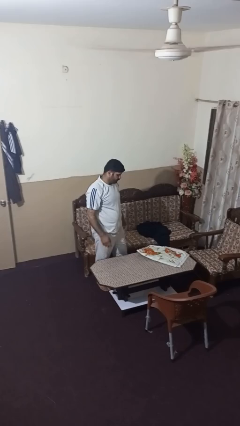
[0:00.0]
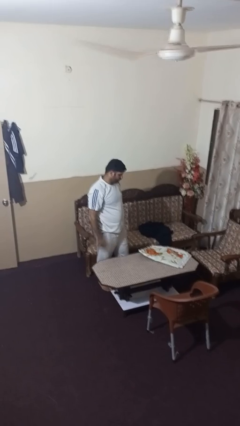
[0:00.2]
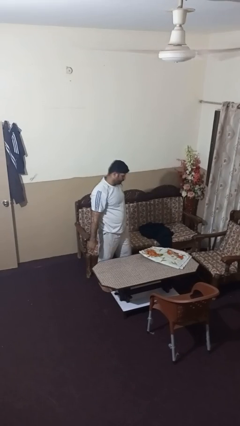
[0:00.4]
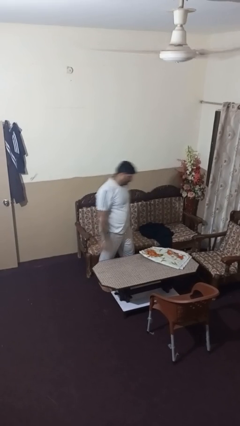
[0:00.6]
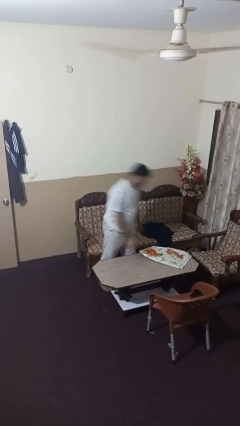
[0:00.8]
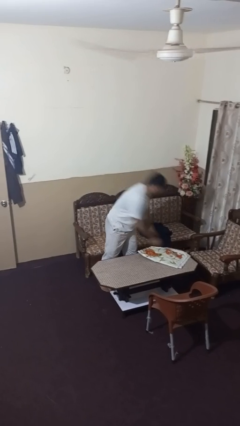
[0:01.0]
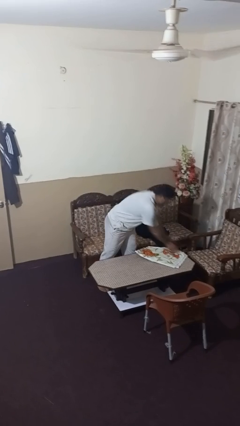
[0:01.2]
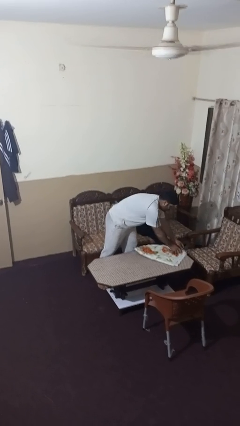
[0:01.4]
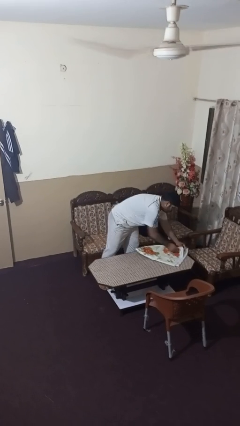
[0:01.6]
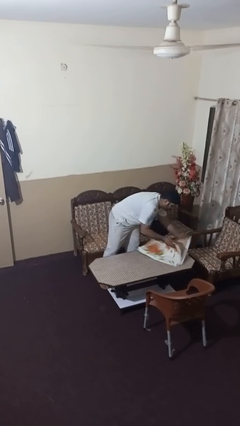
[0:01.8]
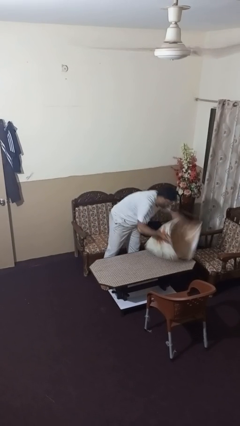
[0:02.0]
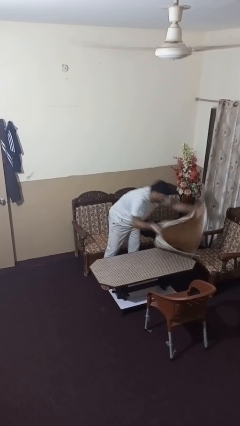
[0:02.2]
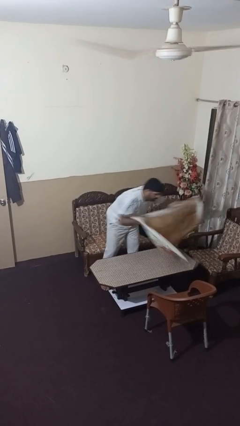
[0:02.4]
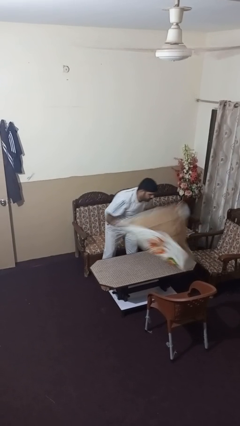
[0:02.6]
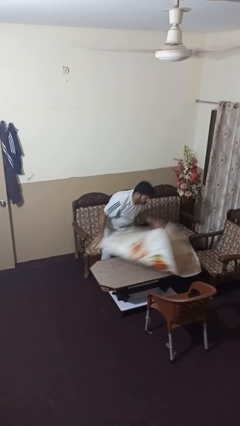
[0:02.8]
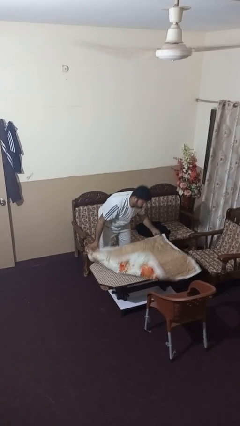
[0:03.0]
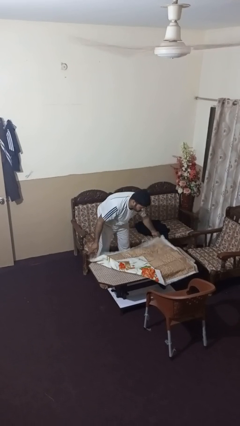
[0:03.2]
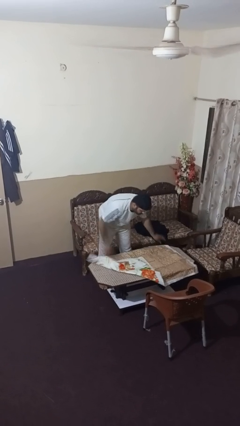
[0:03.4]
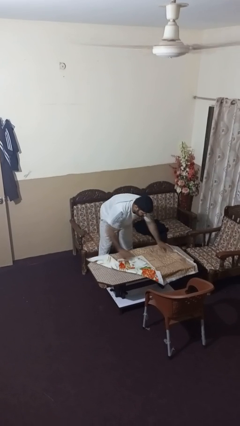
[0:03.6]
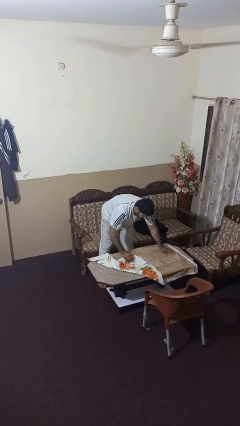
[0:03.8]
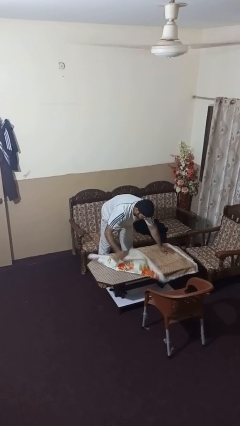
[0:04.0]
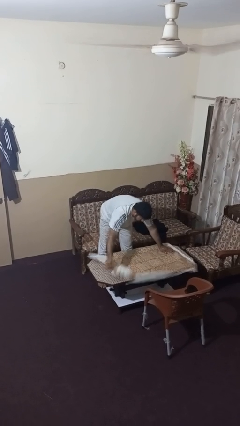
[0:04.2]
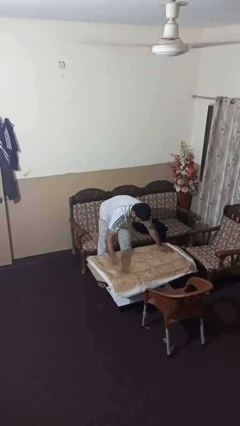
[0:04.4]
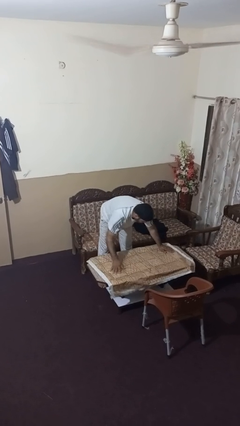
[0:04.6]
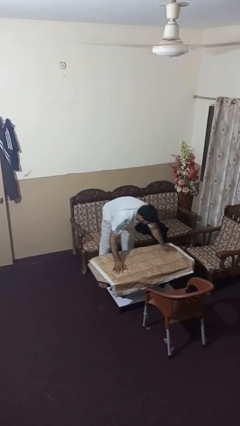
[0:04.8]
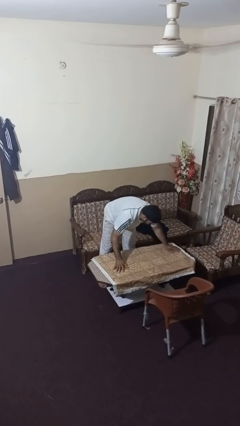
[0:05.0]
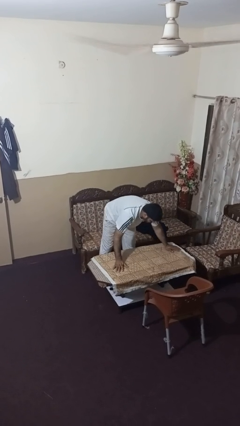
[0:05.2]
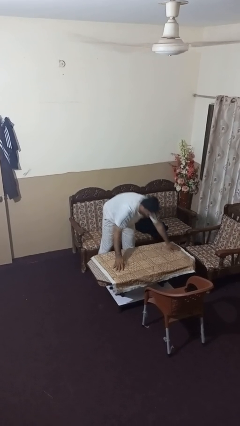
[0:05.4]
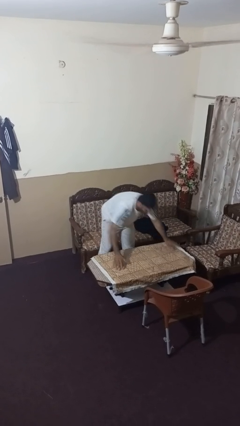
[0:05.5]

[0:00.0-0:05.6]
person spreads tablecloth

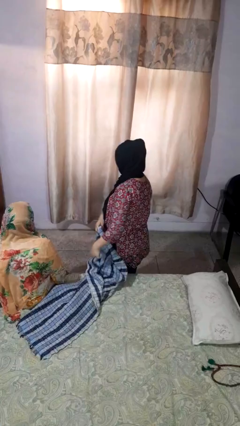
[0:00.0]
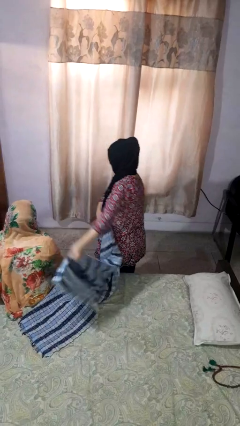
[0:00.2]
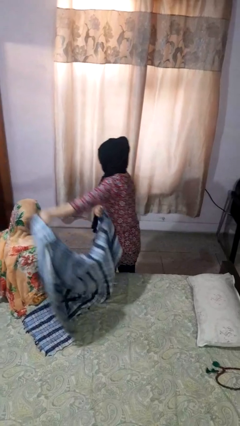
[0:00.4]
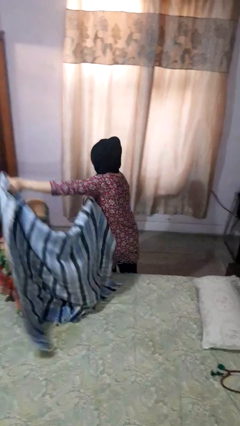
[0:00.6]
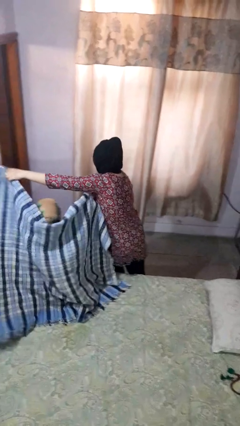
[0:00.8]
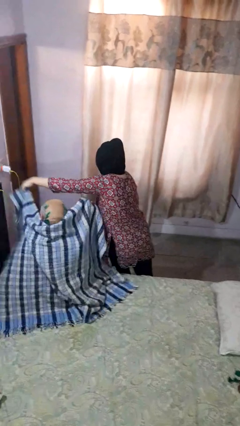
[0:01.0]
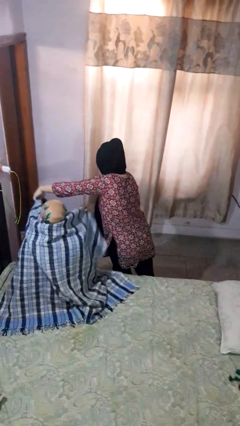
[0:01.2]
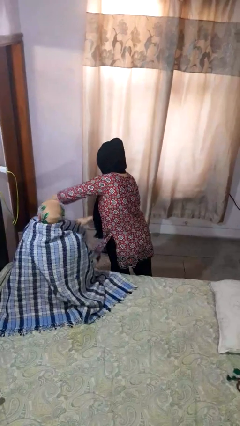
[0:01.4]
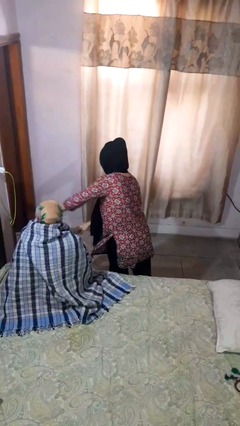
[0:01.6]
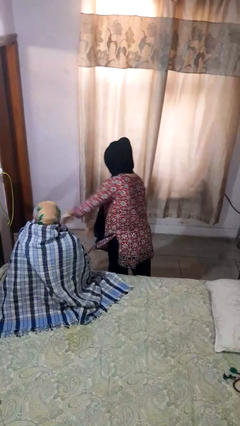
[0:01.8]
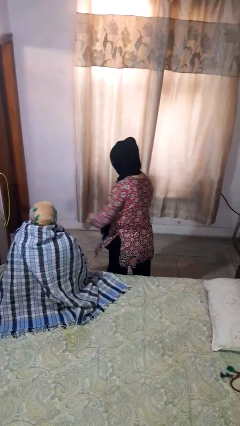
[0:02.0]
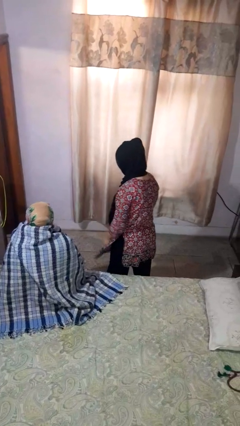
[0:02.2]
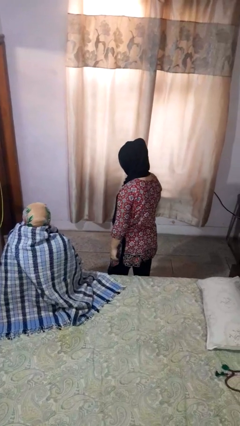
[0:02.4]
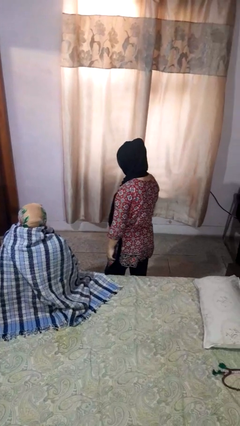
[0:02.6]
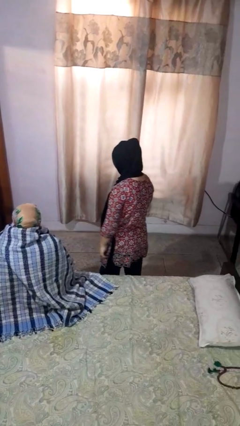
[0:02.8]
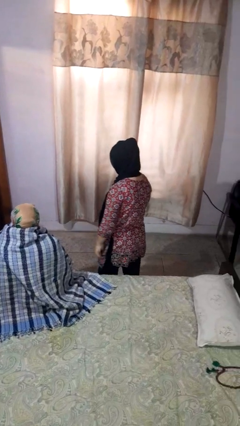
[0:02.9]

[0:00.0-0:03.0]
person covers friend with blanket

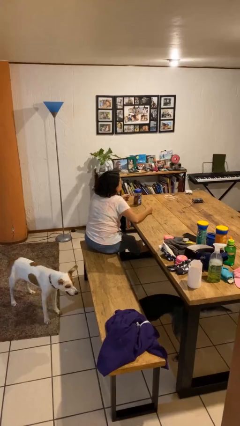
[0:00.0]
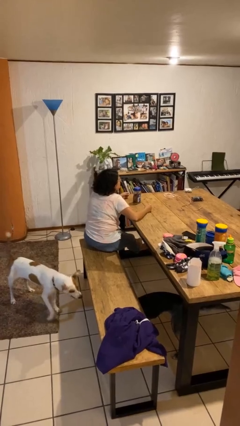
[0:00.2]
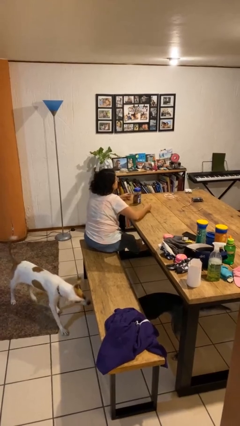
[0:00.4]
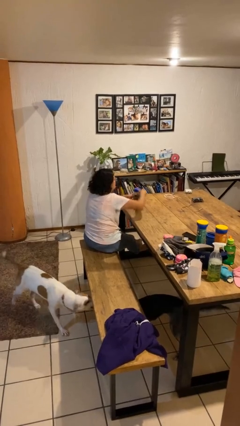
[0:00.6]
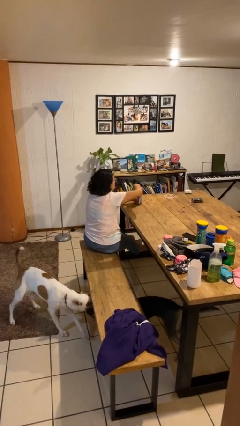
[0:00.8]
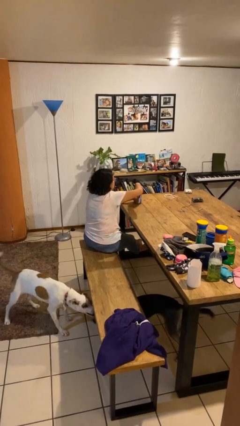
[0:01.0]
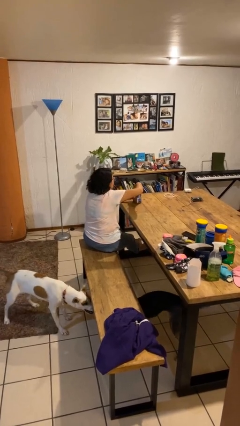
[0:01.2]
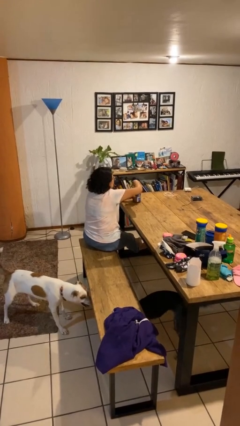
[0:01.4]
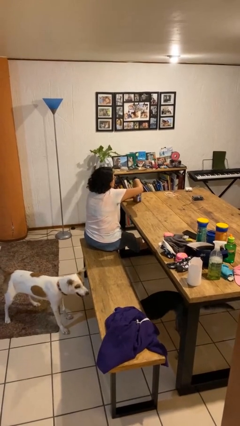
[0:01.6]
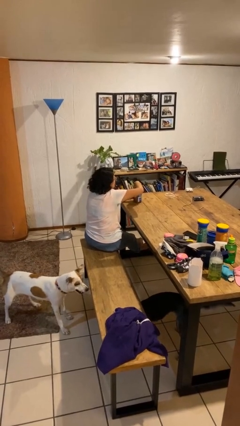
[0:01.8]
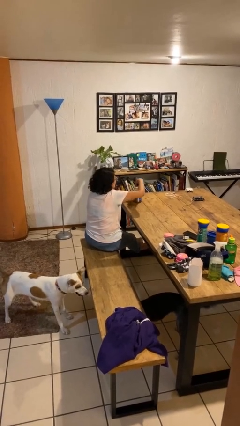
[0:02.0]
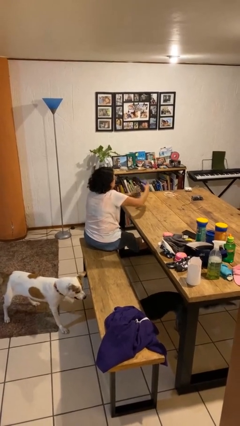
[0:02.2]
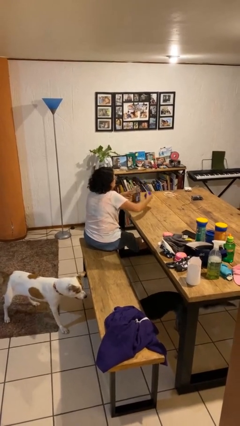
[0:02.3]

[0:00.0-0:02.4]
person opens jar

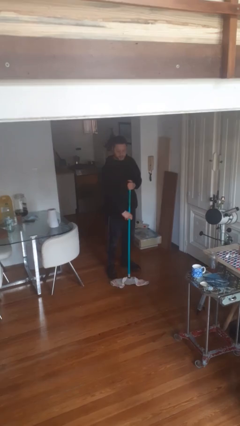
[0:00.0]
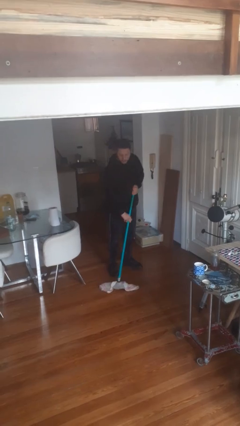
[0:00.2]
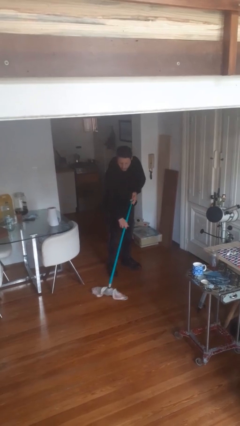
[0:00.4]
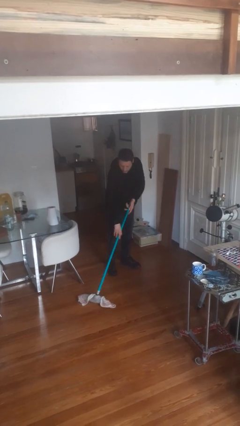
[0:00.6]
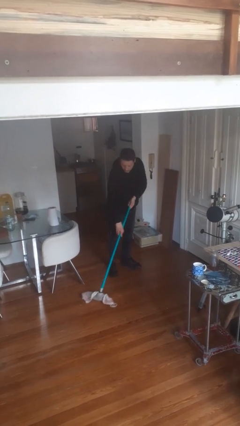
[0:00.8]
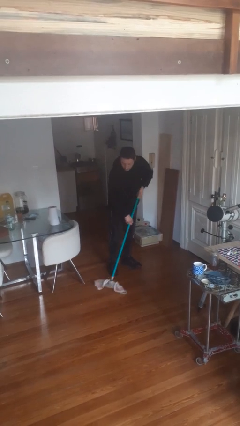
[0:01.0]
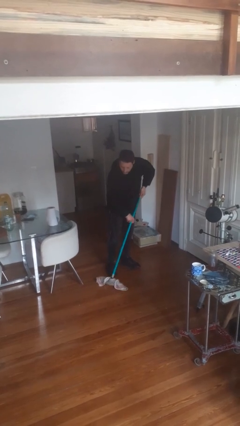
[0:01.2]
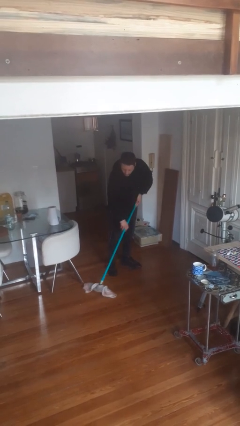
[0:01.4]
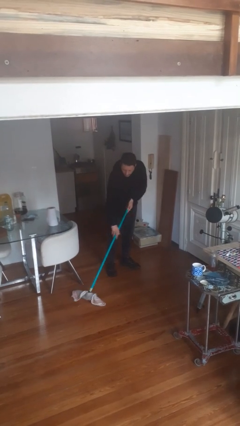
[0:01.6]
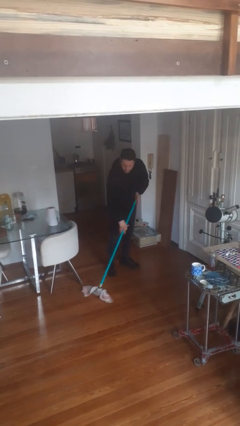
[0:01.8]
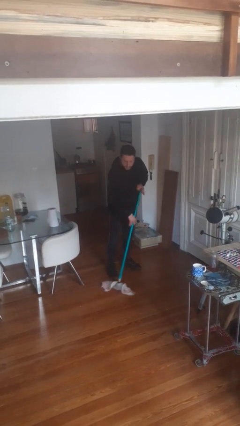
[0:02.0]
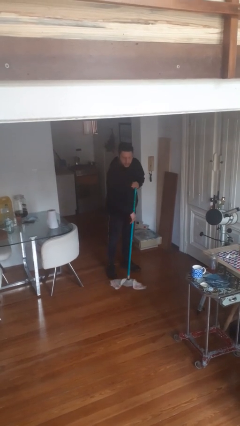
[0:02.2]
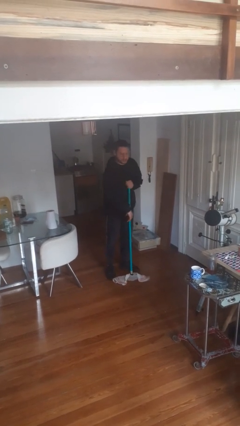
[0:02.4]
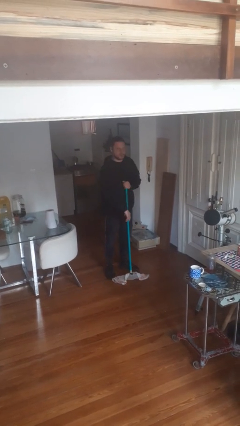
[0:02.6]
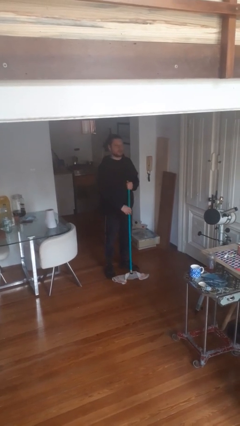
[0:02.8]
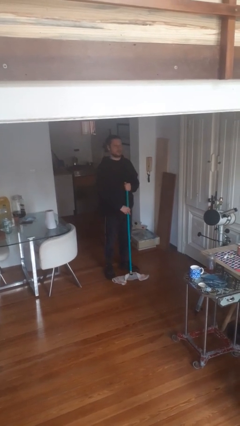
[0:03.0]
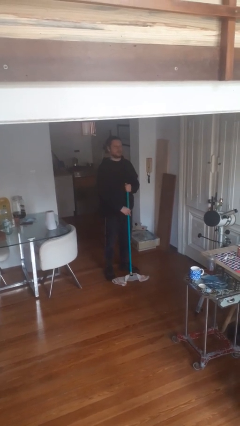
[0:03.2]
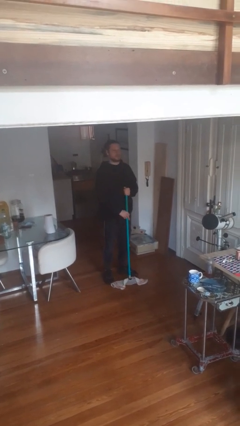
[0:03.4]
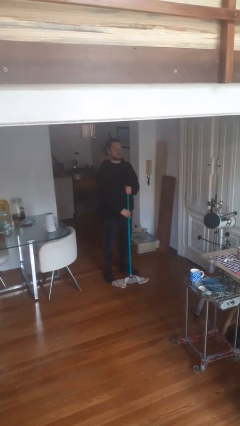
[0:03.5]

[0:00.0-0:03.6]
person mops

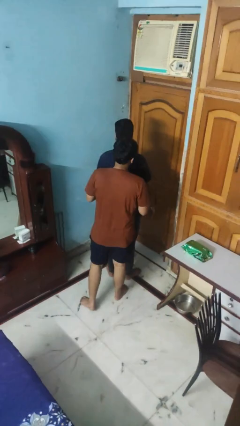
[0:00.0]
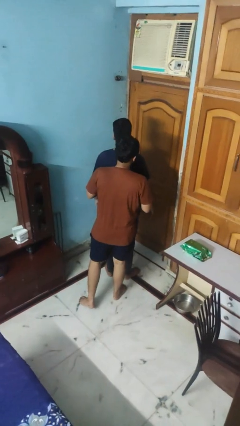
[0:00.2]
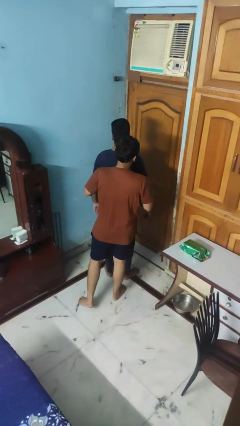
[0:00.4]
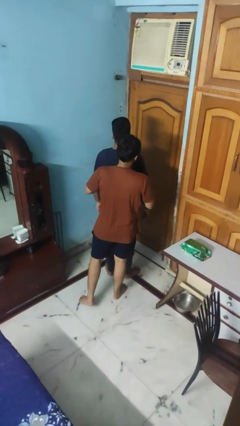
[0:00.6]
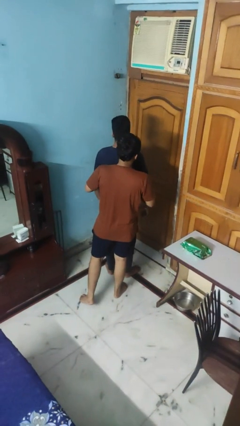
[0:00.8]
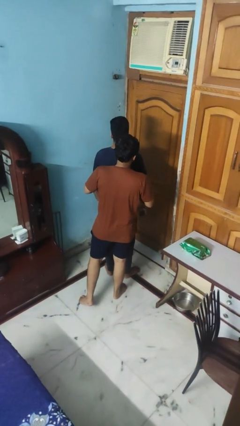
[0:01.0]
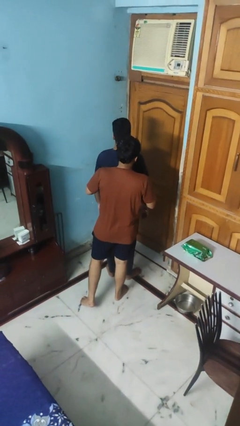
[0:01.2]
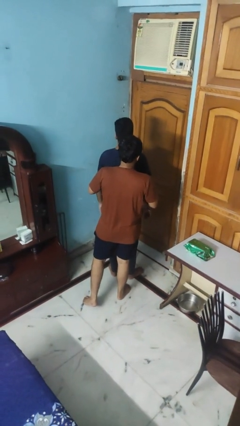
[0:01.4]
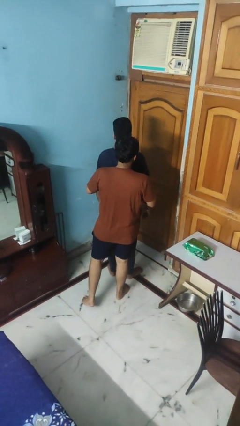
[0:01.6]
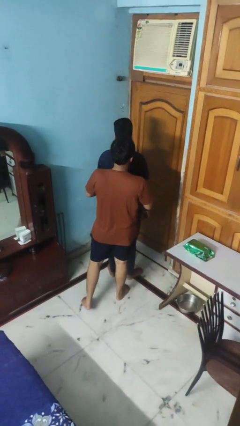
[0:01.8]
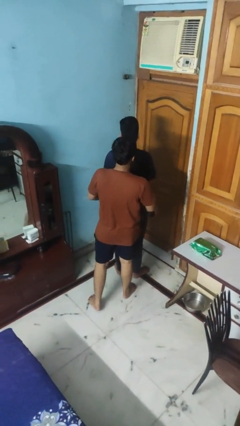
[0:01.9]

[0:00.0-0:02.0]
person hugs person from behind

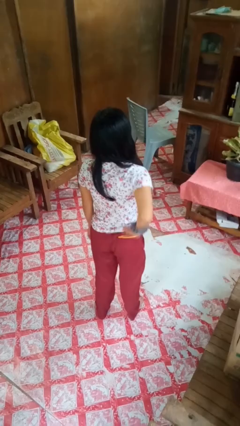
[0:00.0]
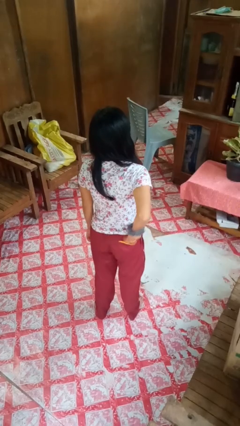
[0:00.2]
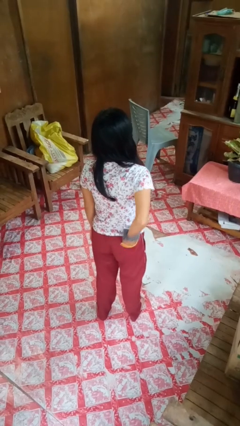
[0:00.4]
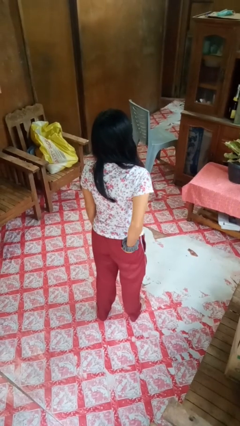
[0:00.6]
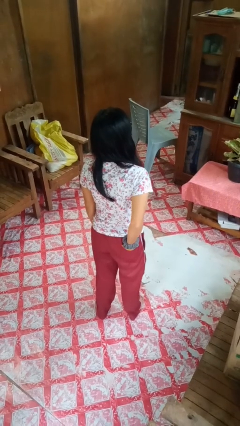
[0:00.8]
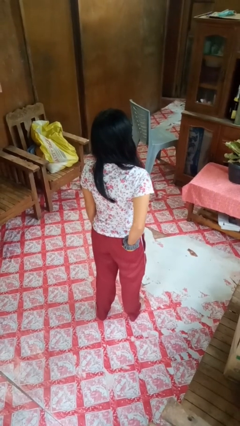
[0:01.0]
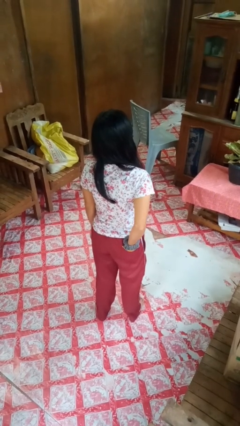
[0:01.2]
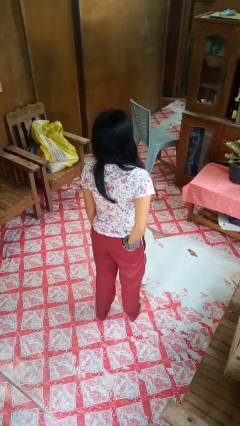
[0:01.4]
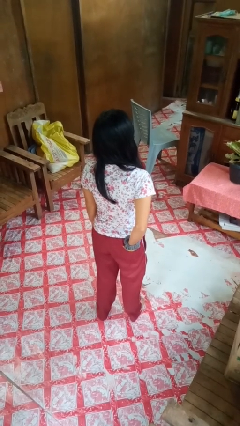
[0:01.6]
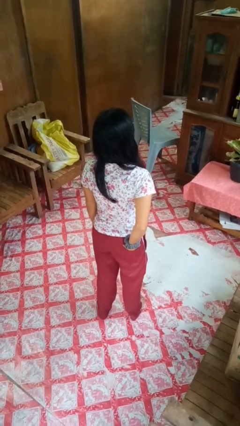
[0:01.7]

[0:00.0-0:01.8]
person puts hands in back pockets
